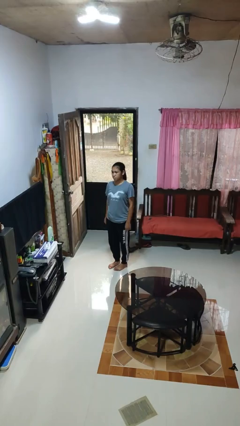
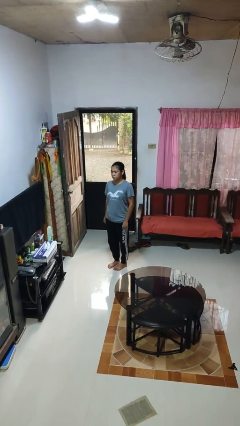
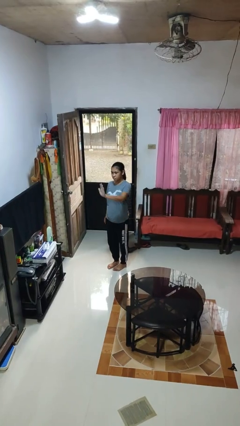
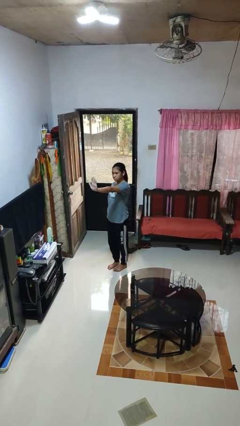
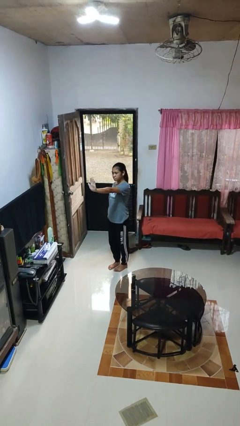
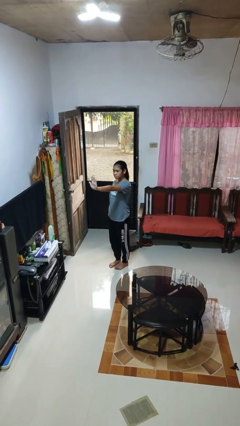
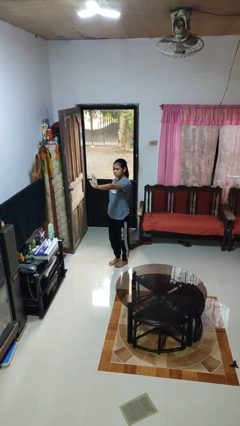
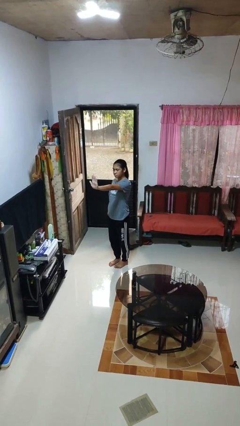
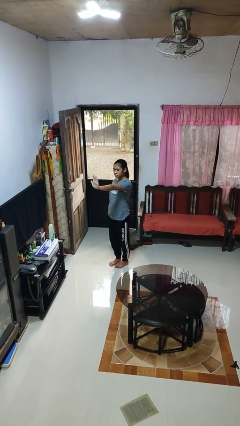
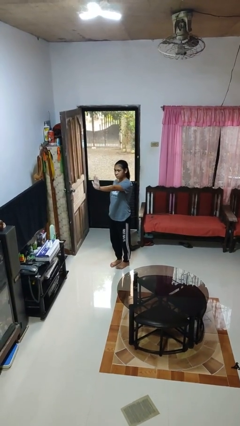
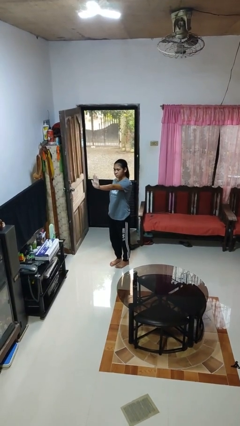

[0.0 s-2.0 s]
person gestures stop

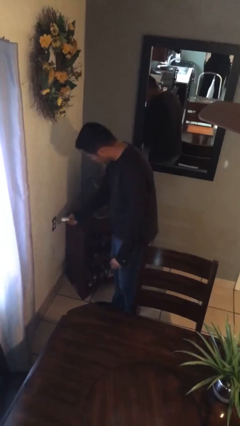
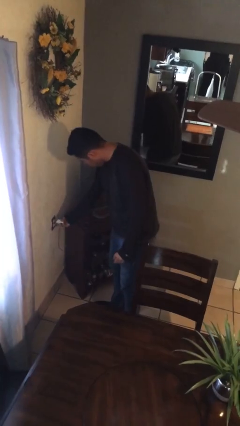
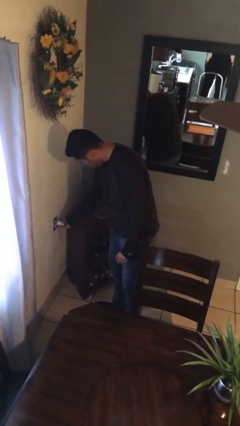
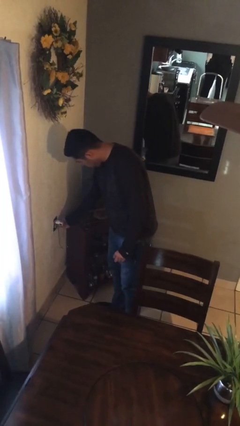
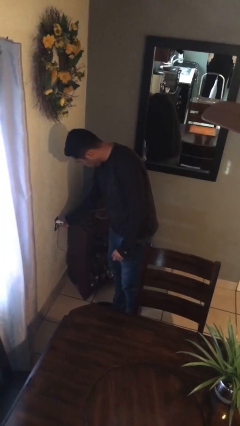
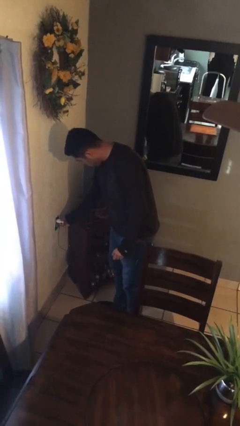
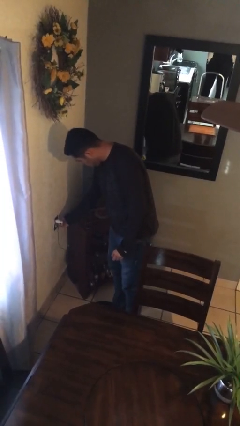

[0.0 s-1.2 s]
person pushes wheeled trashcan

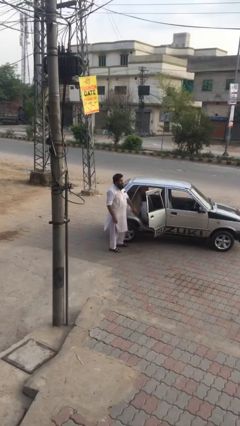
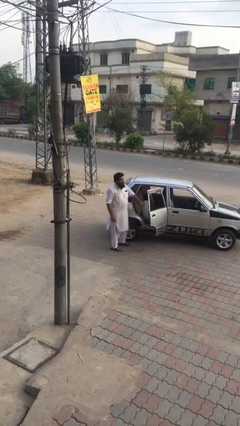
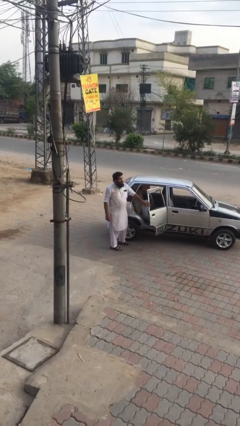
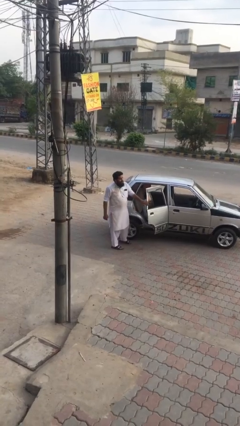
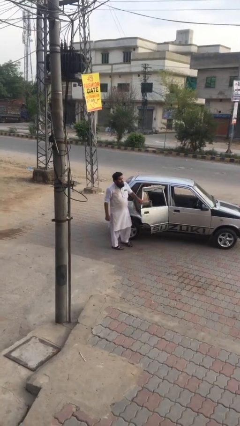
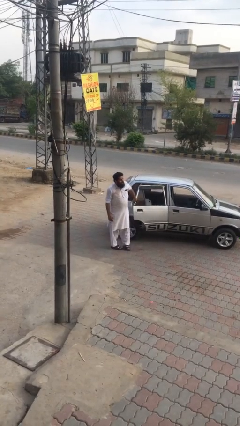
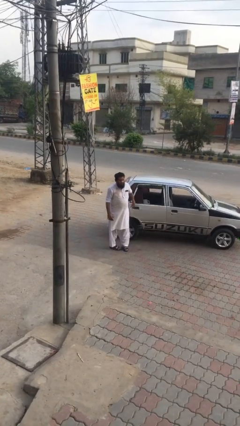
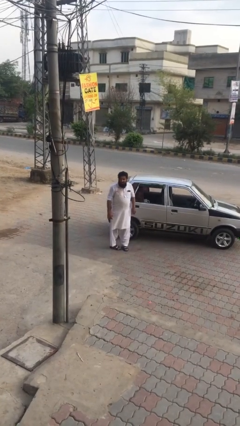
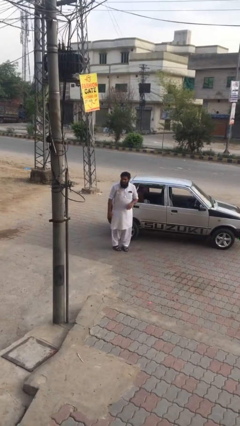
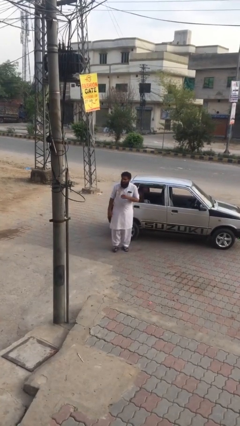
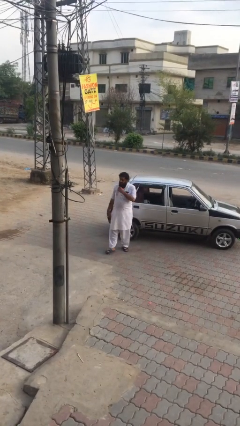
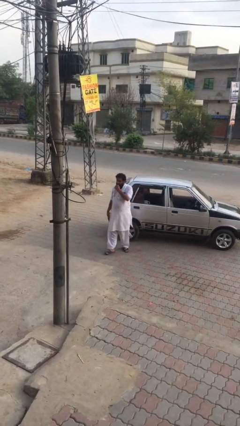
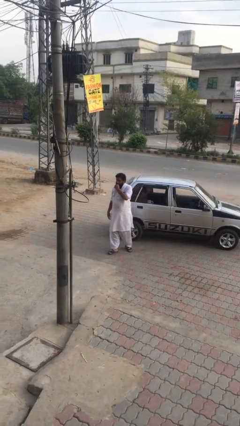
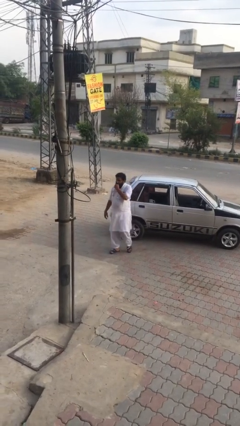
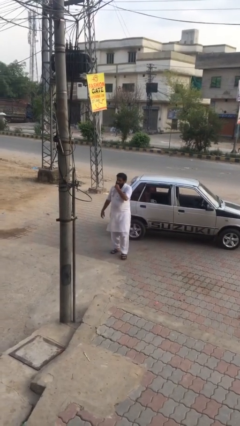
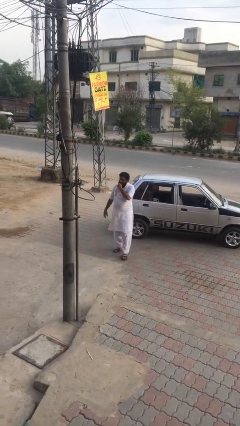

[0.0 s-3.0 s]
person closes car door

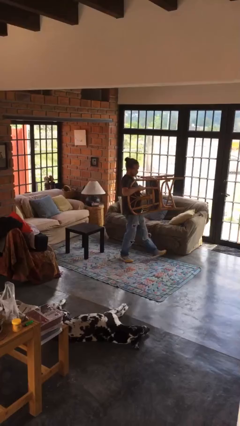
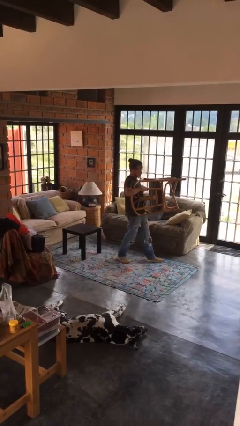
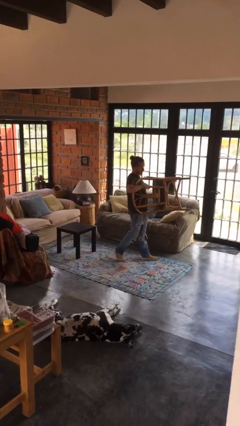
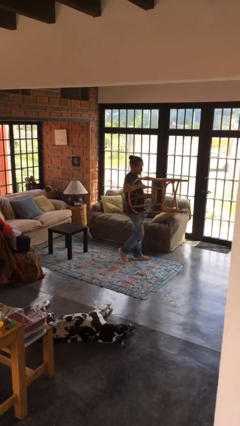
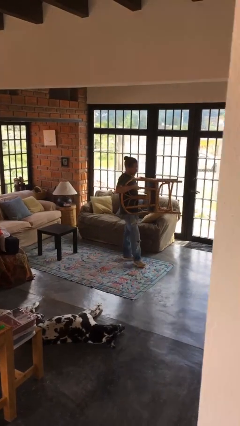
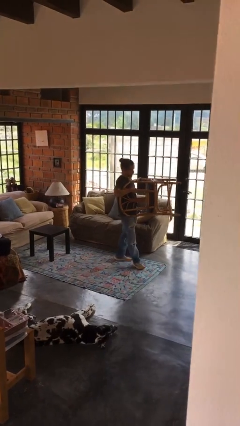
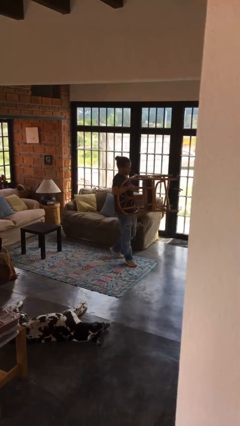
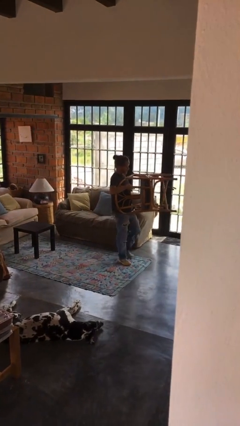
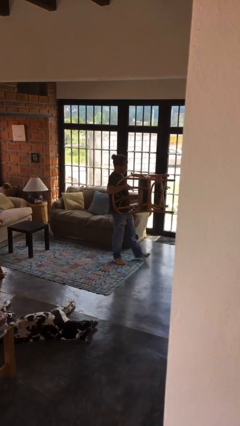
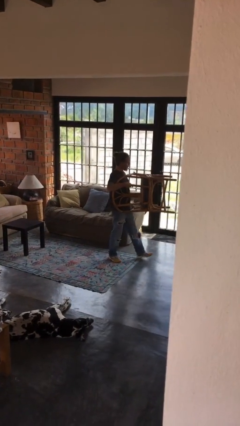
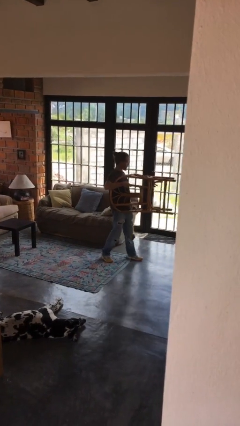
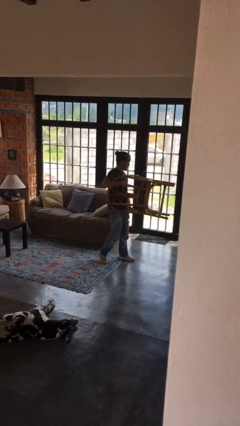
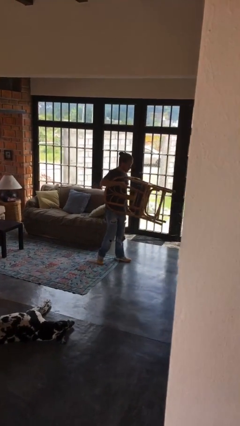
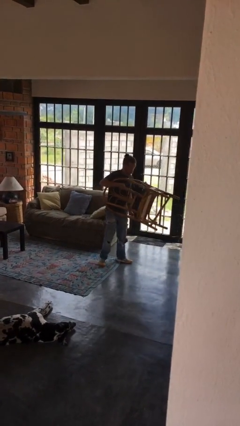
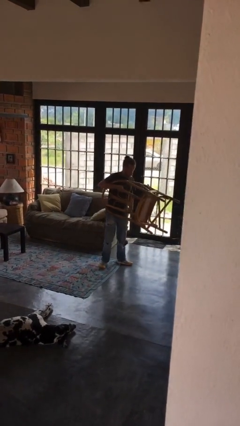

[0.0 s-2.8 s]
person carries furniture

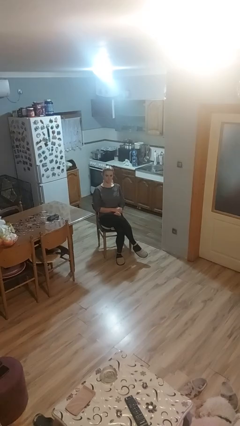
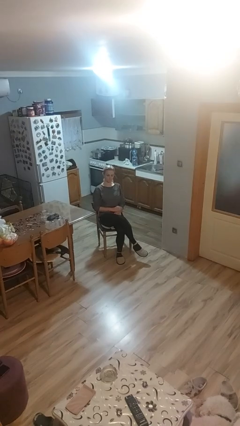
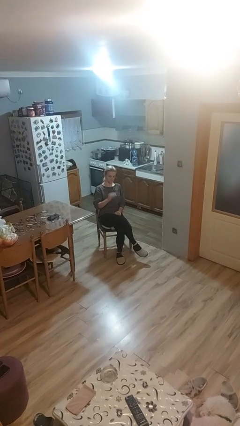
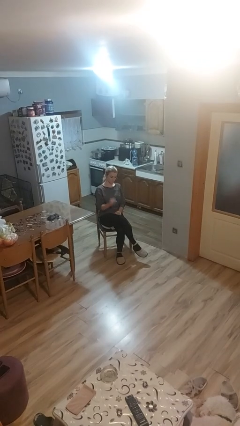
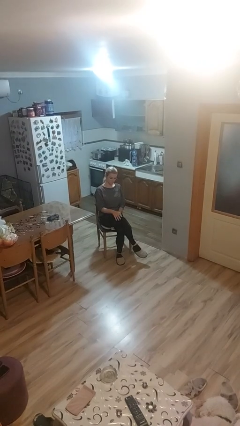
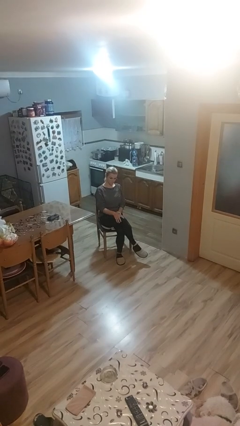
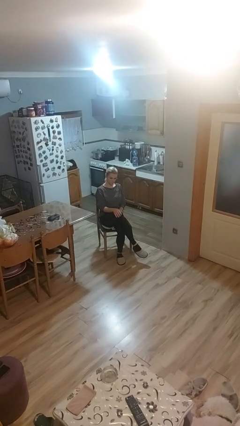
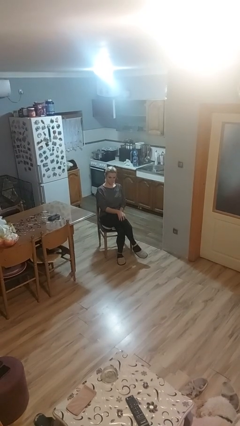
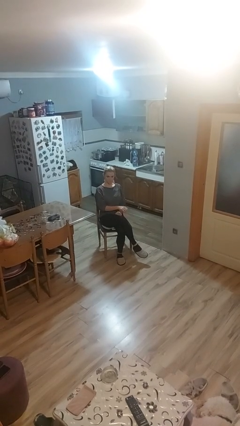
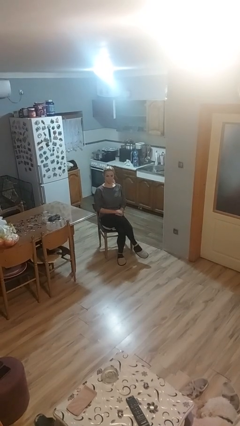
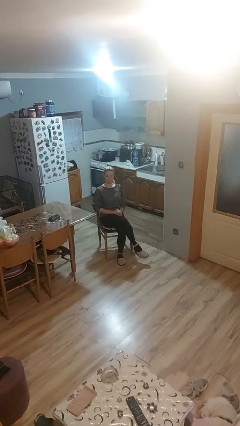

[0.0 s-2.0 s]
person slaps hands on thighs

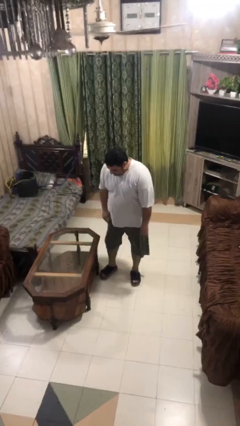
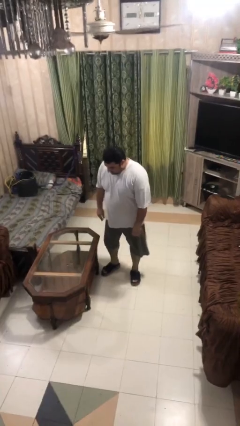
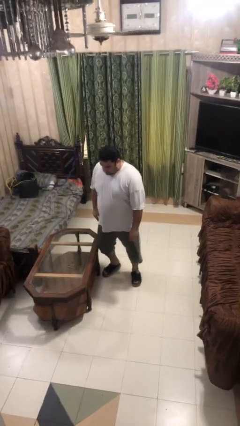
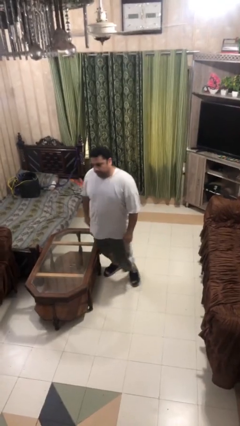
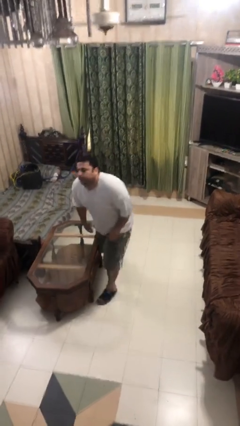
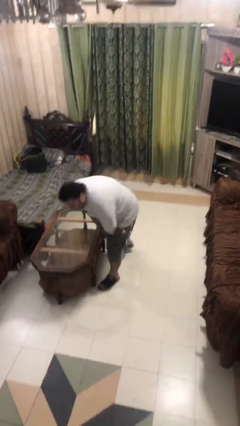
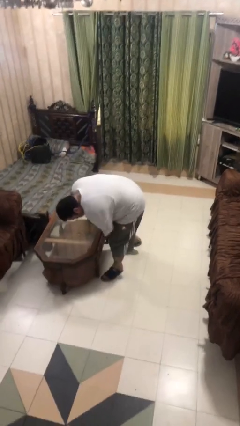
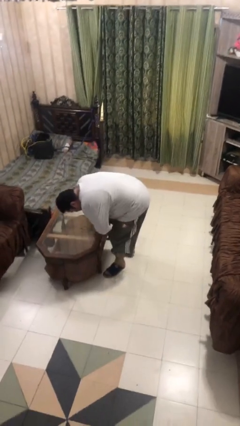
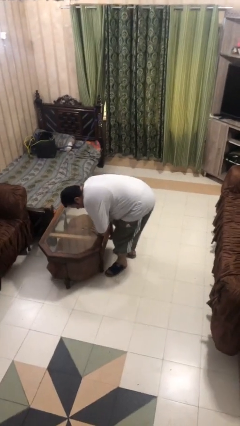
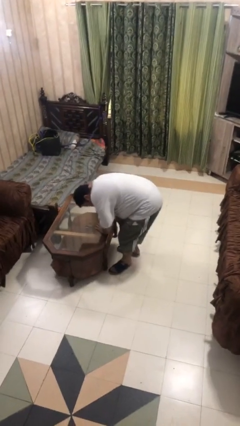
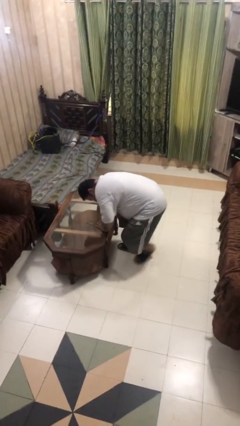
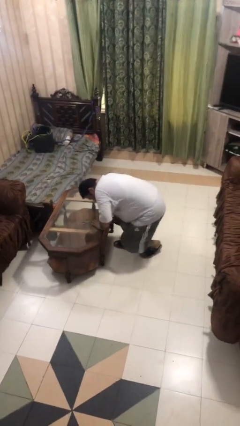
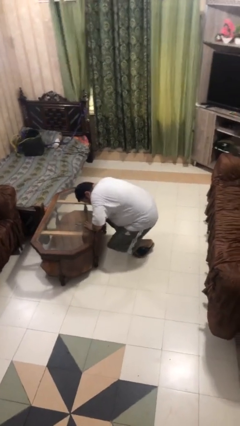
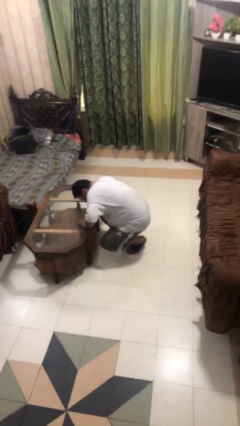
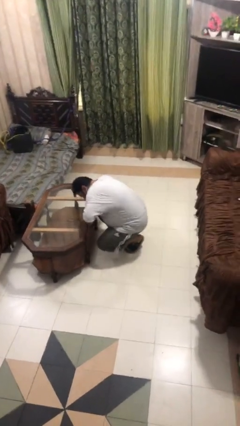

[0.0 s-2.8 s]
person trips on object on floor

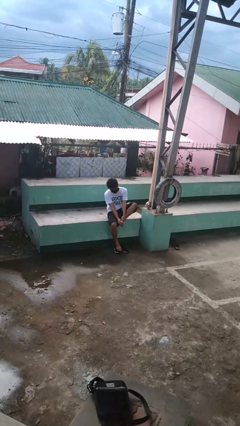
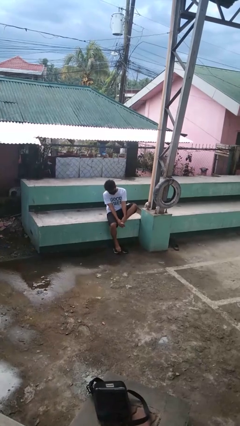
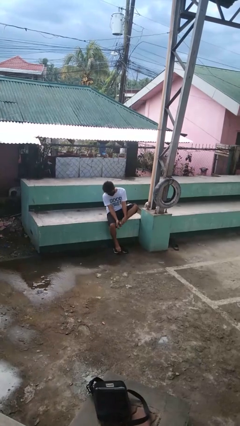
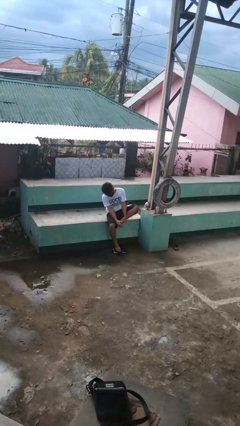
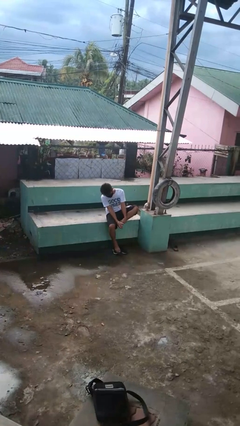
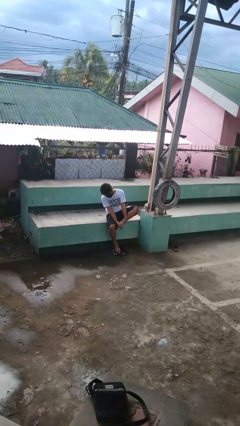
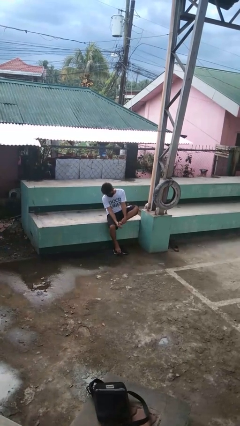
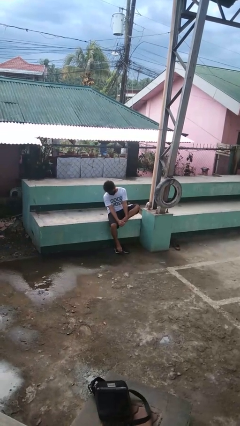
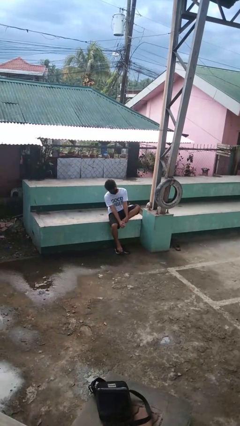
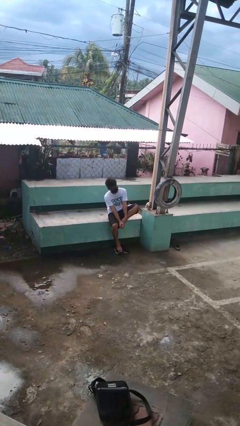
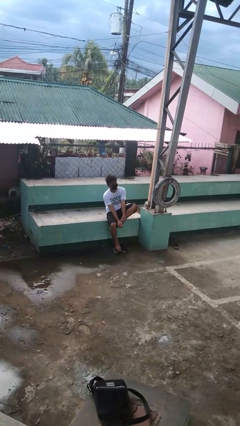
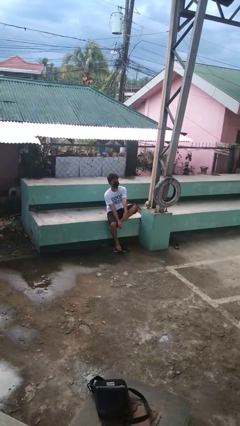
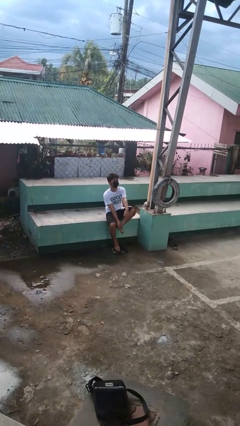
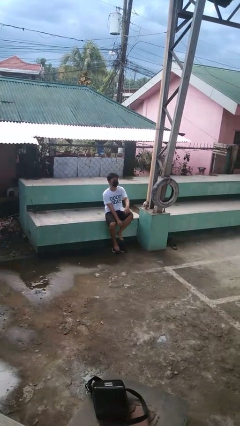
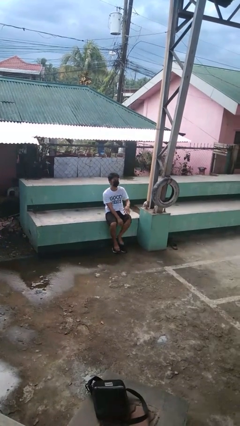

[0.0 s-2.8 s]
person rubs foot
